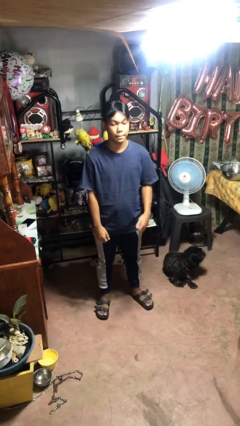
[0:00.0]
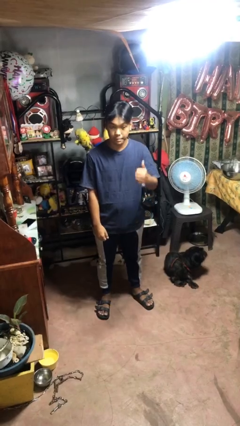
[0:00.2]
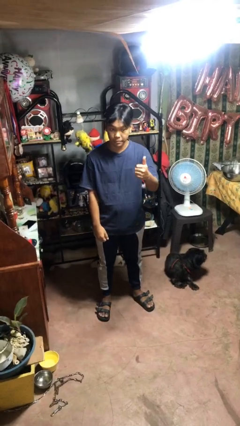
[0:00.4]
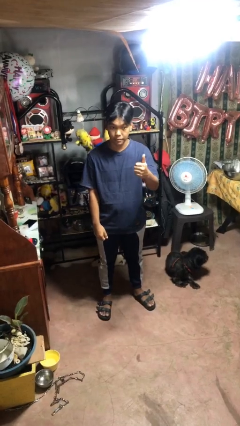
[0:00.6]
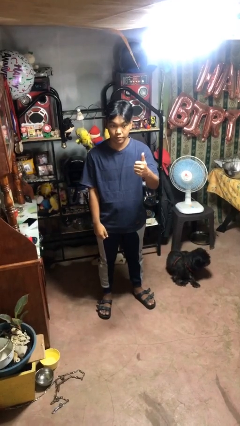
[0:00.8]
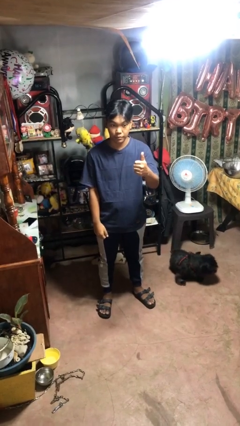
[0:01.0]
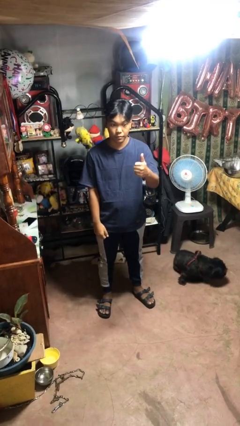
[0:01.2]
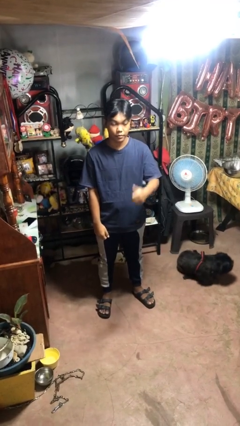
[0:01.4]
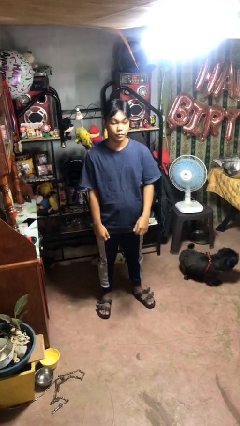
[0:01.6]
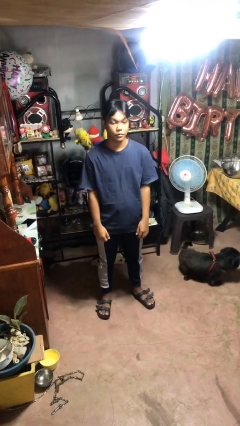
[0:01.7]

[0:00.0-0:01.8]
person gestures thumbs up

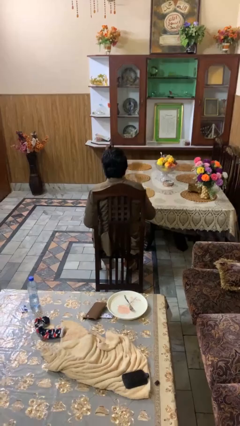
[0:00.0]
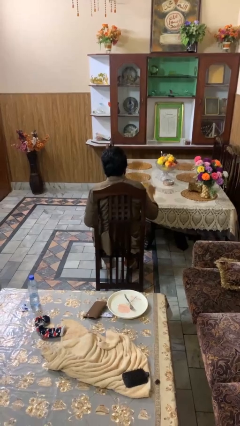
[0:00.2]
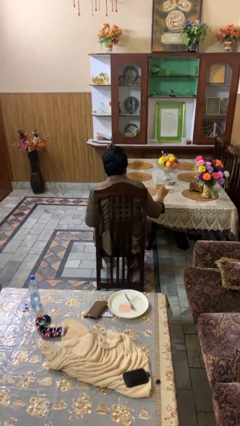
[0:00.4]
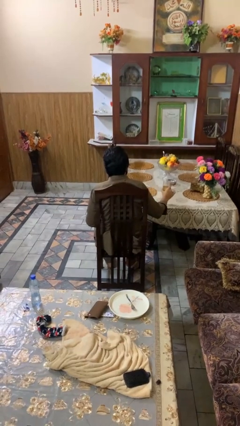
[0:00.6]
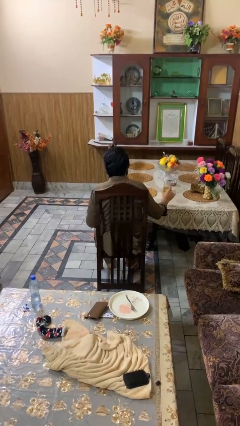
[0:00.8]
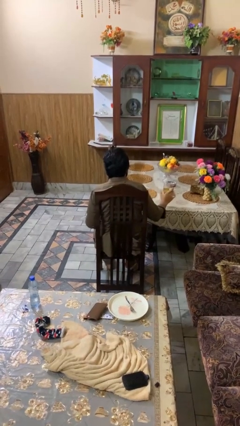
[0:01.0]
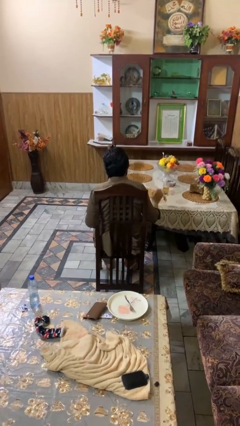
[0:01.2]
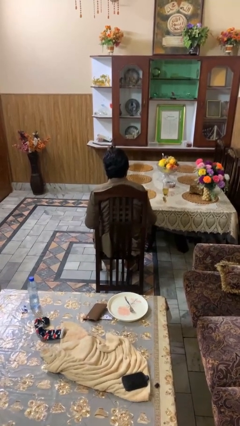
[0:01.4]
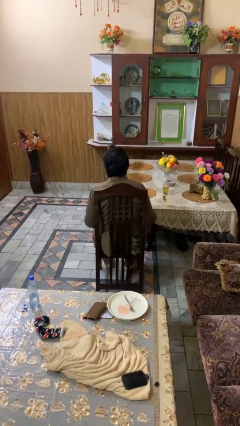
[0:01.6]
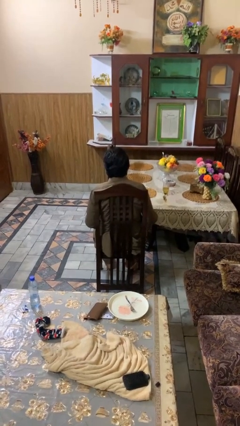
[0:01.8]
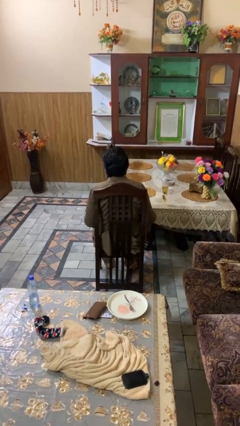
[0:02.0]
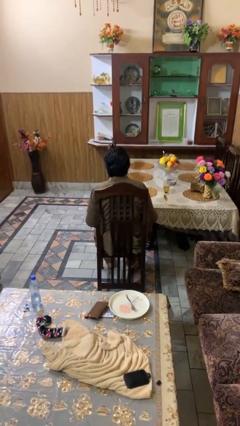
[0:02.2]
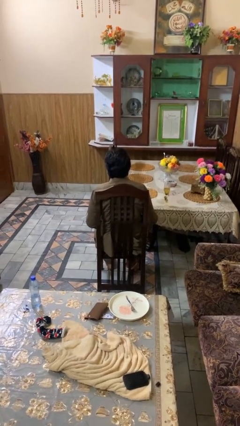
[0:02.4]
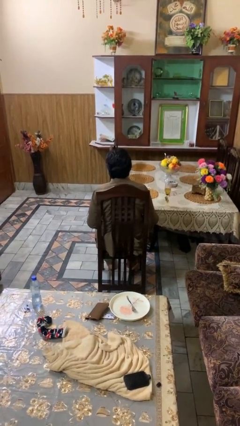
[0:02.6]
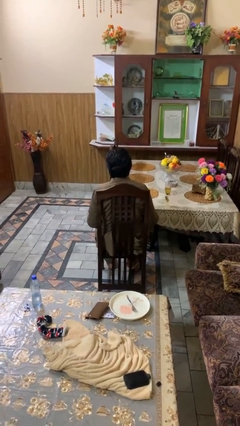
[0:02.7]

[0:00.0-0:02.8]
person puts down object on table

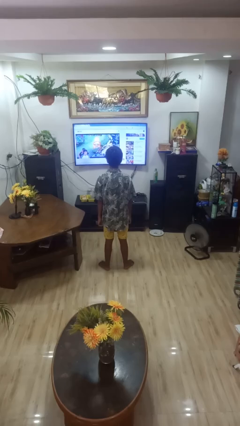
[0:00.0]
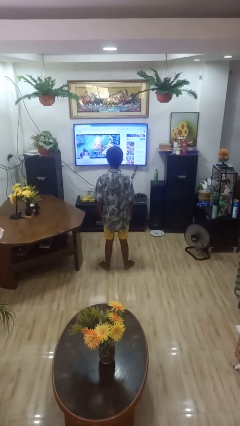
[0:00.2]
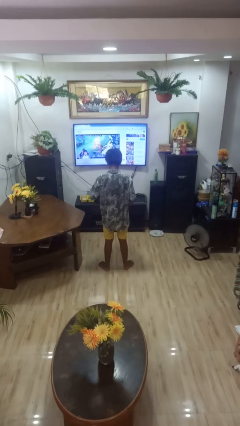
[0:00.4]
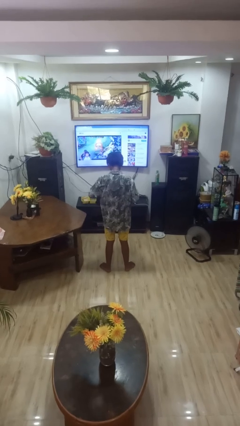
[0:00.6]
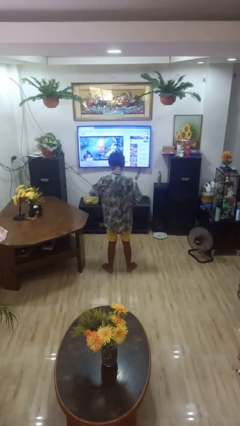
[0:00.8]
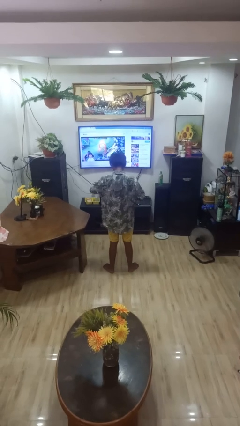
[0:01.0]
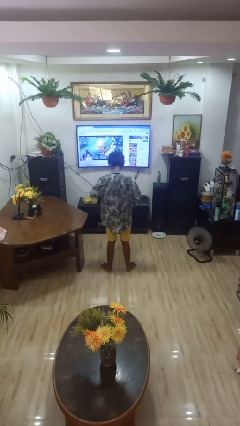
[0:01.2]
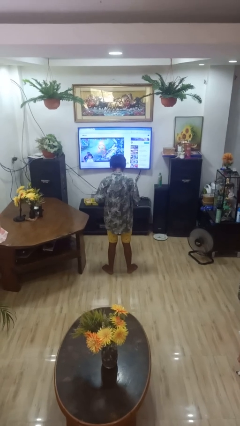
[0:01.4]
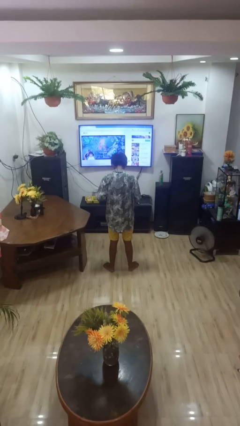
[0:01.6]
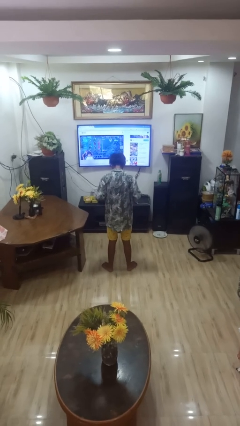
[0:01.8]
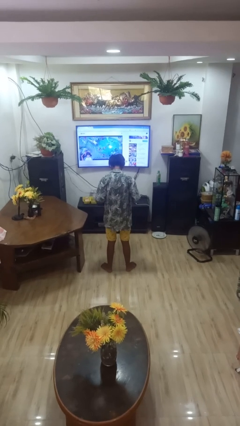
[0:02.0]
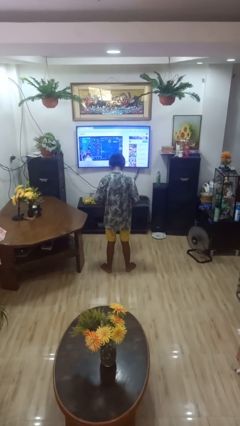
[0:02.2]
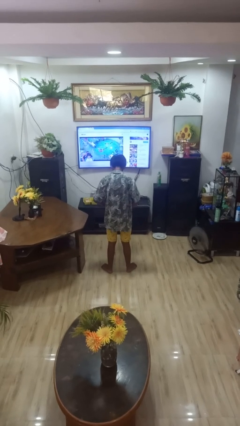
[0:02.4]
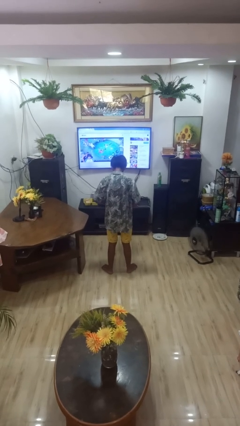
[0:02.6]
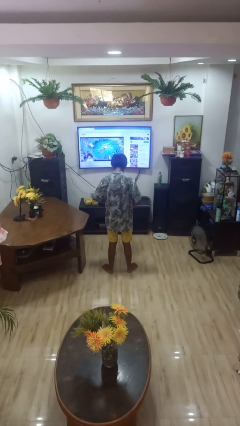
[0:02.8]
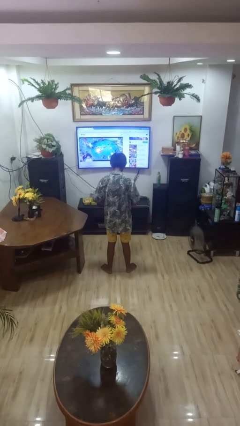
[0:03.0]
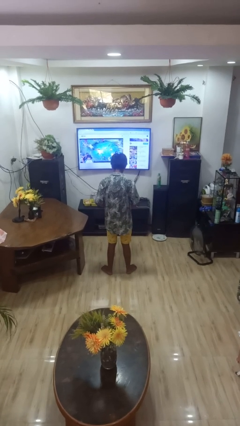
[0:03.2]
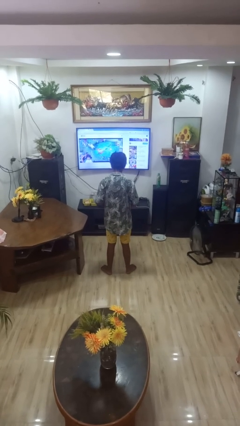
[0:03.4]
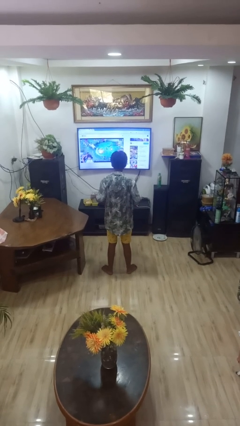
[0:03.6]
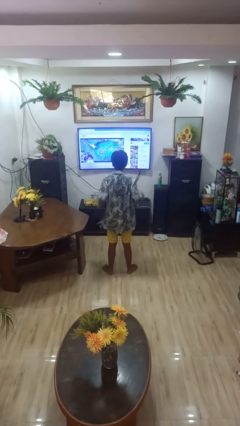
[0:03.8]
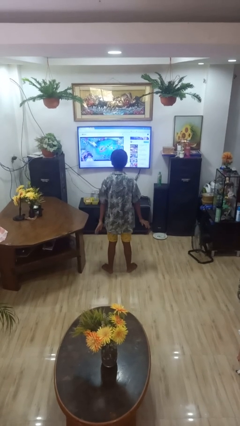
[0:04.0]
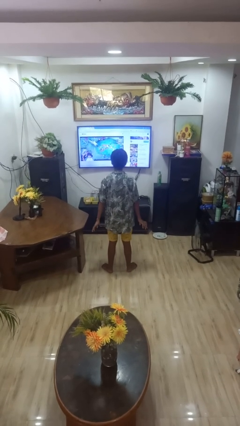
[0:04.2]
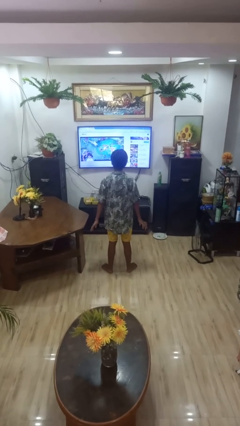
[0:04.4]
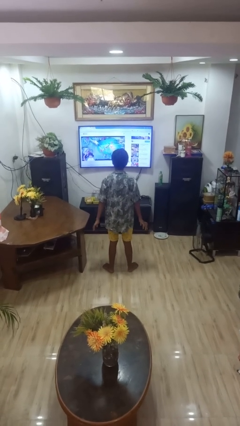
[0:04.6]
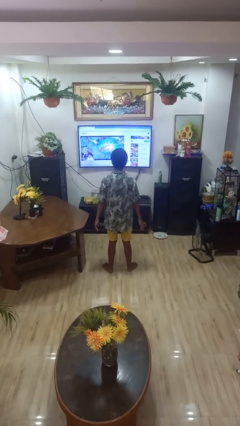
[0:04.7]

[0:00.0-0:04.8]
person unbuttons shirt

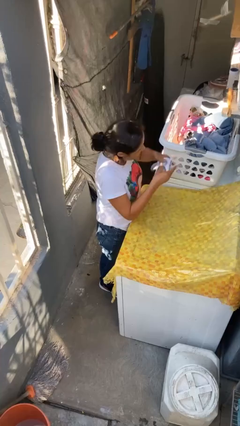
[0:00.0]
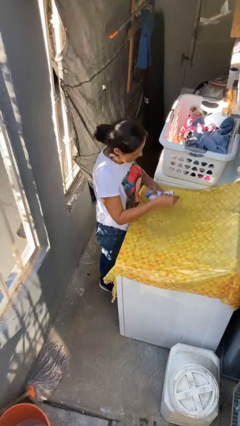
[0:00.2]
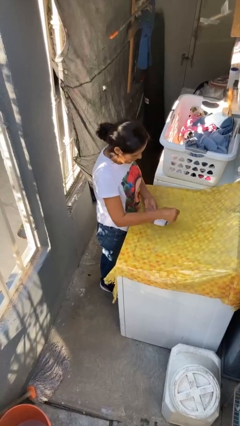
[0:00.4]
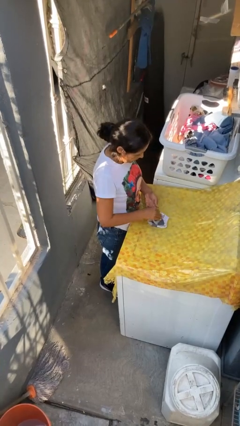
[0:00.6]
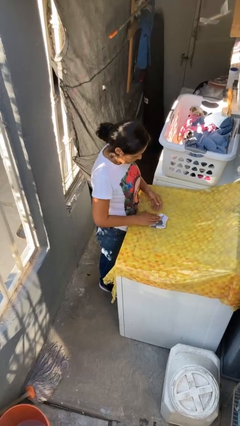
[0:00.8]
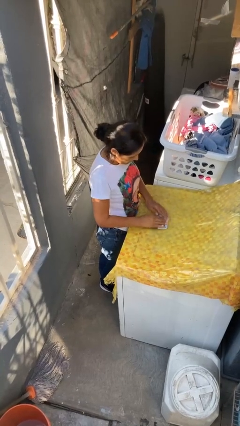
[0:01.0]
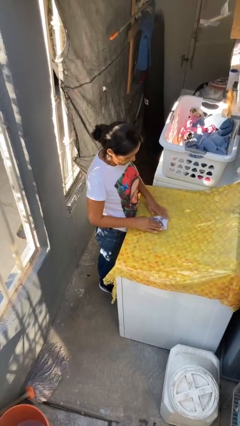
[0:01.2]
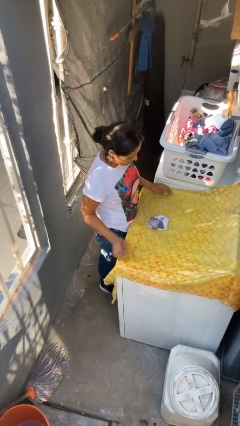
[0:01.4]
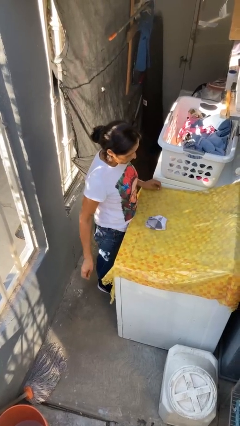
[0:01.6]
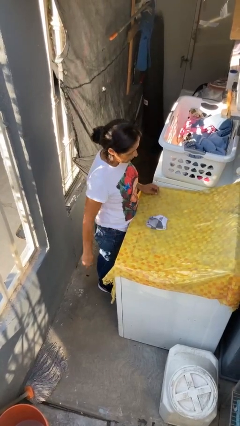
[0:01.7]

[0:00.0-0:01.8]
person folds socks

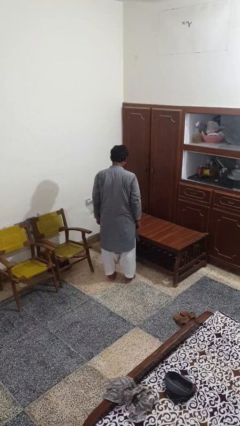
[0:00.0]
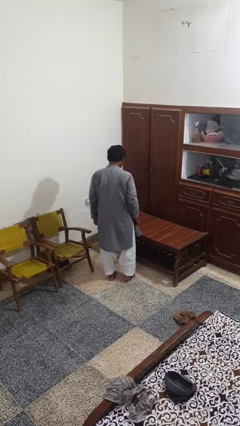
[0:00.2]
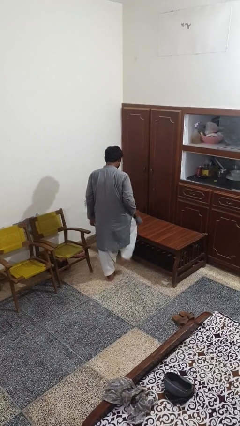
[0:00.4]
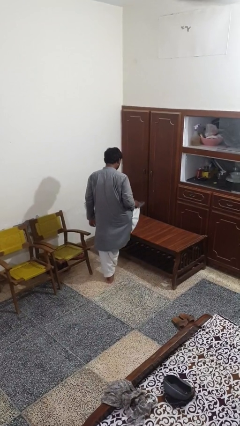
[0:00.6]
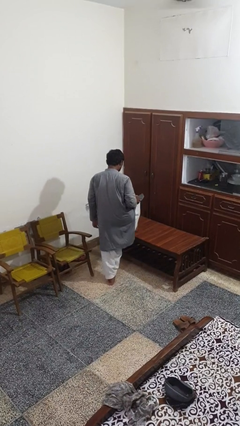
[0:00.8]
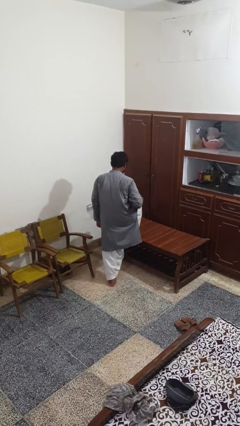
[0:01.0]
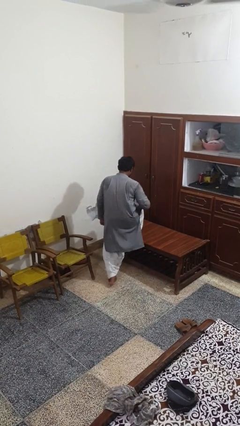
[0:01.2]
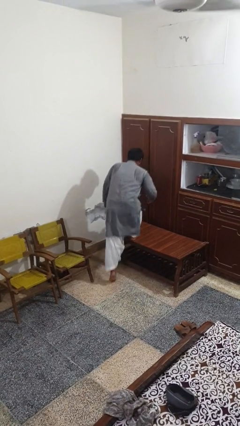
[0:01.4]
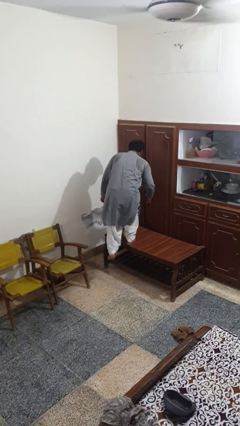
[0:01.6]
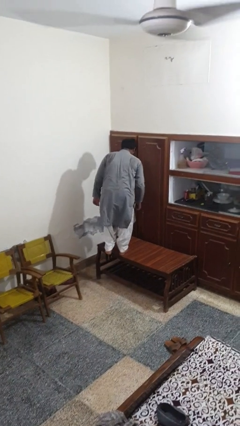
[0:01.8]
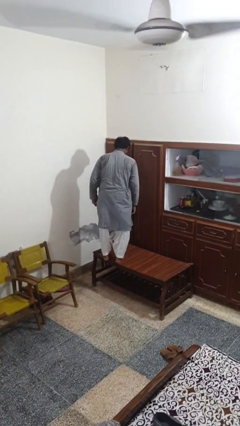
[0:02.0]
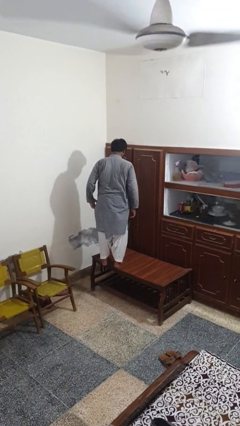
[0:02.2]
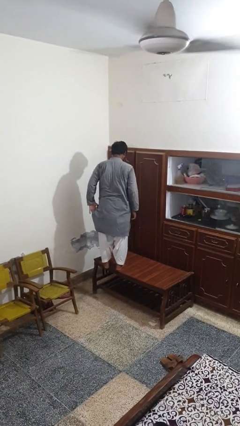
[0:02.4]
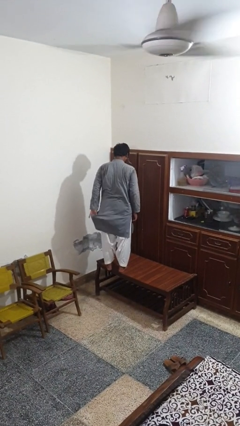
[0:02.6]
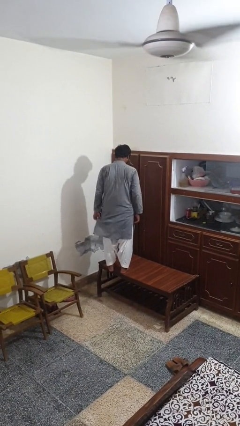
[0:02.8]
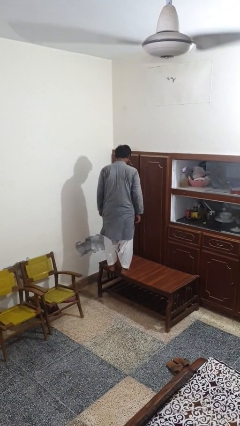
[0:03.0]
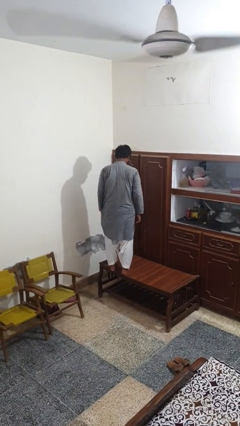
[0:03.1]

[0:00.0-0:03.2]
person climbs on table

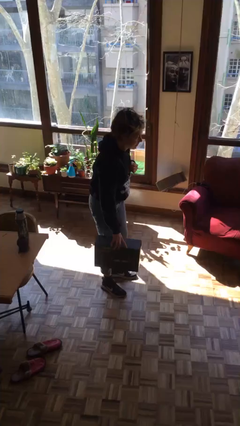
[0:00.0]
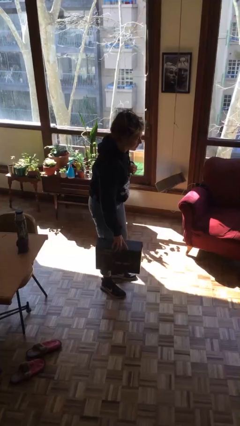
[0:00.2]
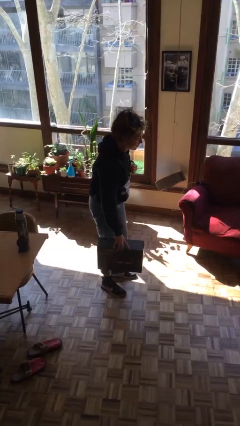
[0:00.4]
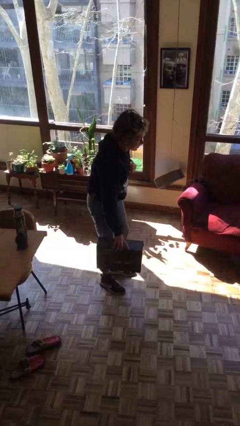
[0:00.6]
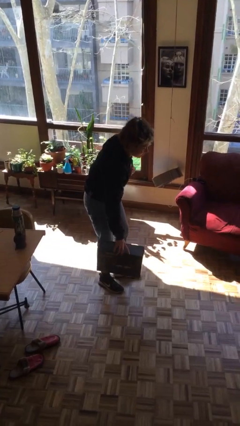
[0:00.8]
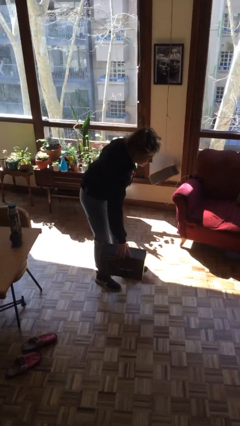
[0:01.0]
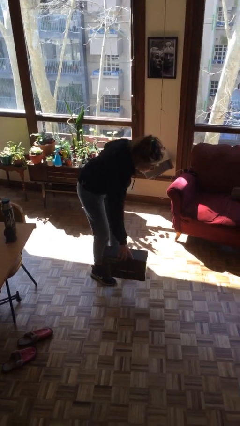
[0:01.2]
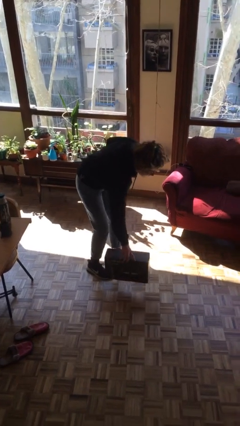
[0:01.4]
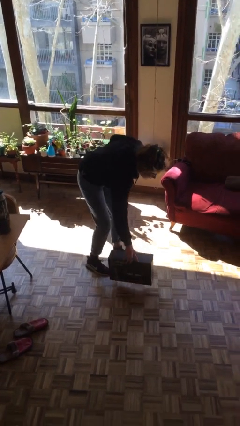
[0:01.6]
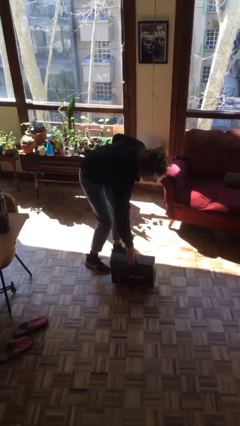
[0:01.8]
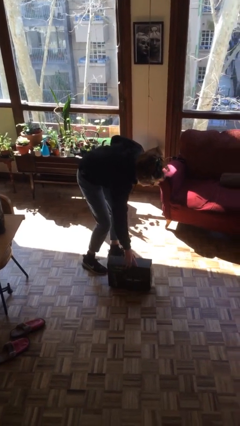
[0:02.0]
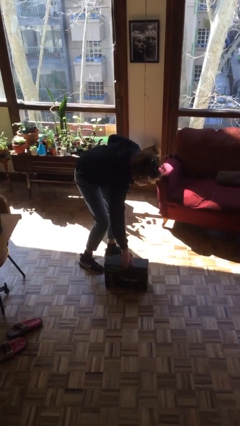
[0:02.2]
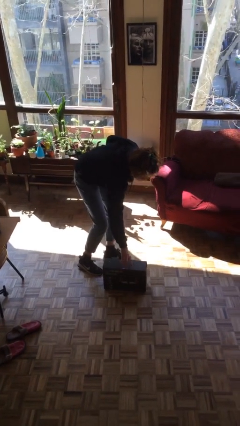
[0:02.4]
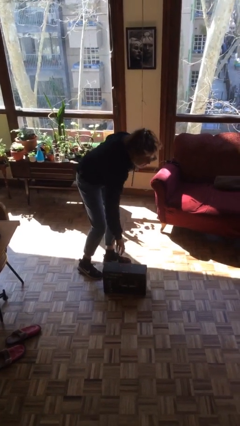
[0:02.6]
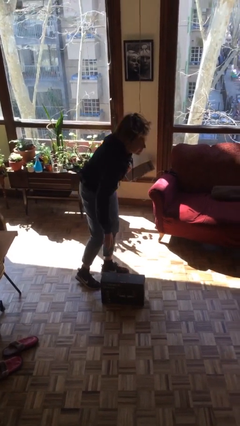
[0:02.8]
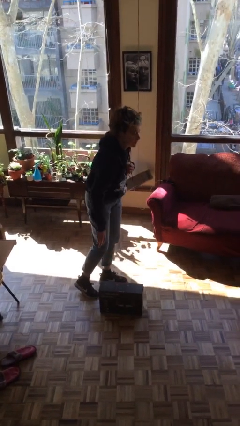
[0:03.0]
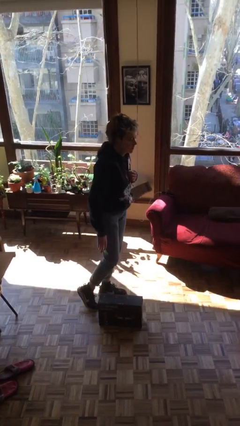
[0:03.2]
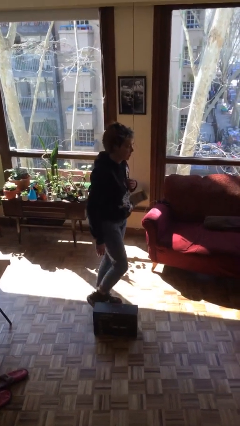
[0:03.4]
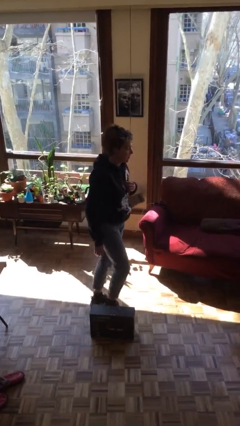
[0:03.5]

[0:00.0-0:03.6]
person puts down object on floor
